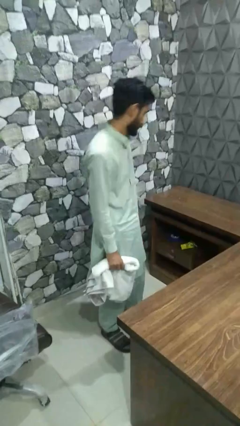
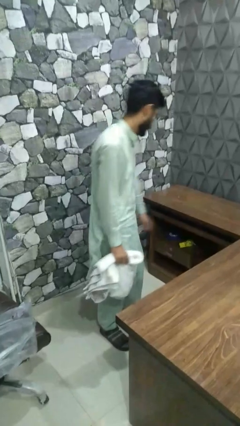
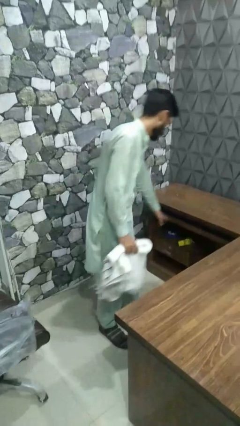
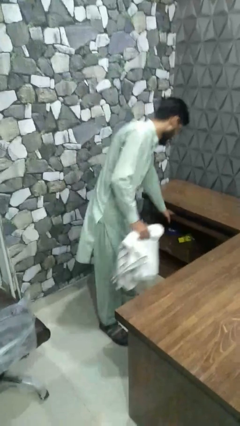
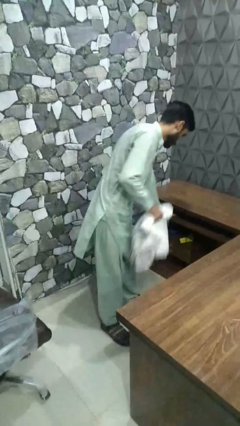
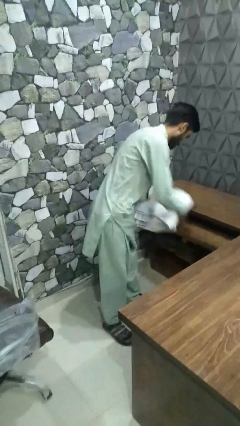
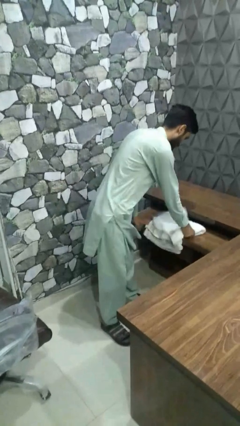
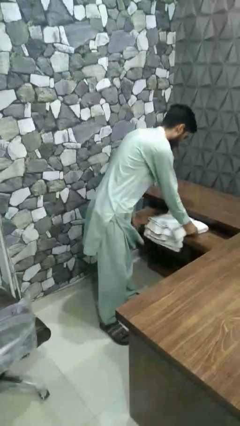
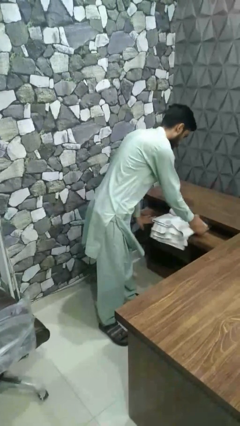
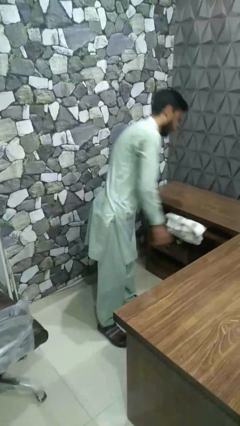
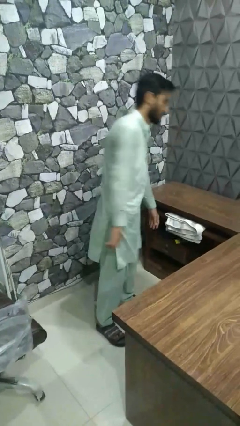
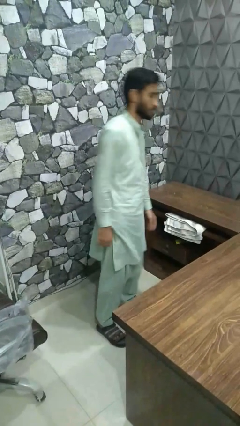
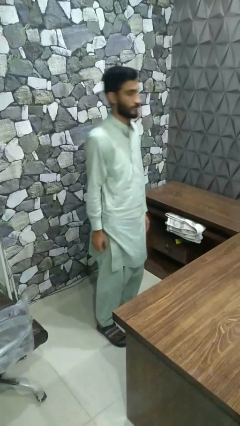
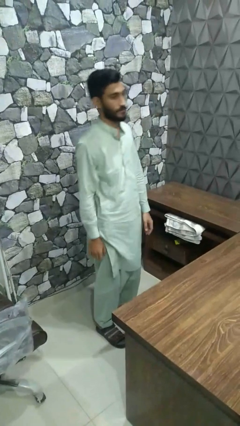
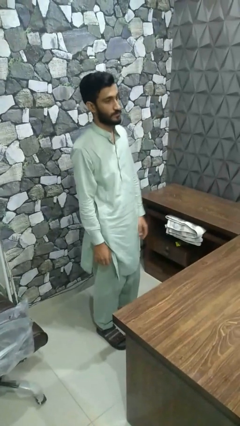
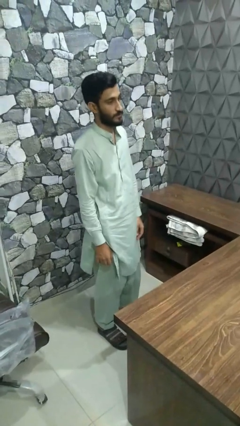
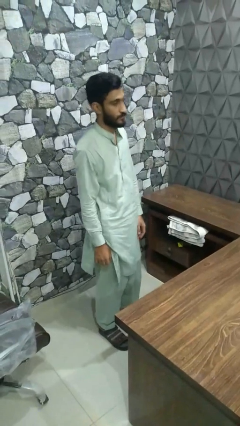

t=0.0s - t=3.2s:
person puts clothes into dresser

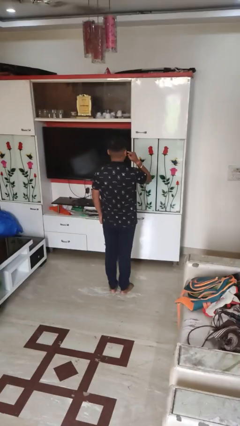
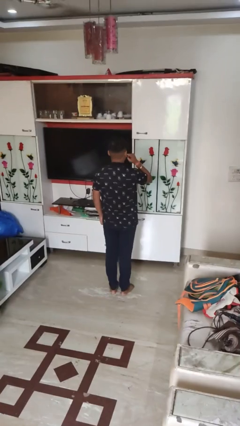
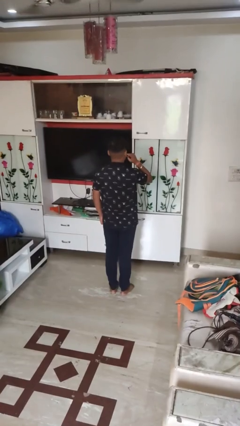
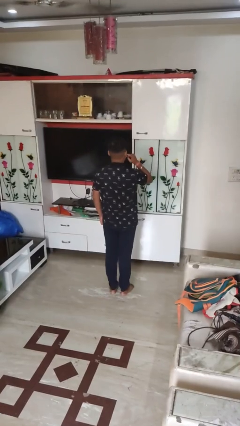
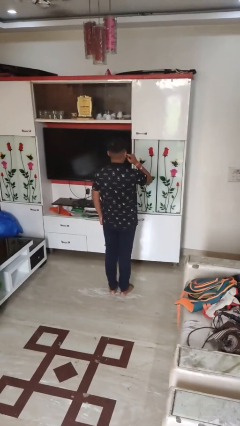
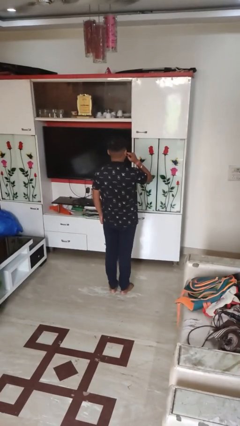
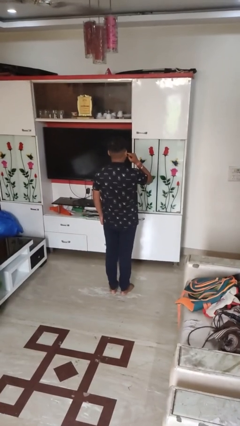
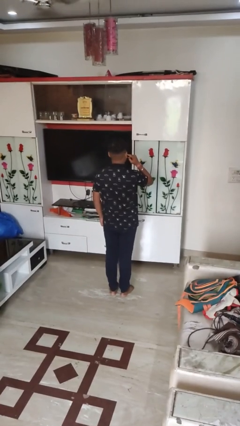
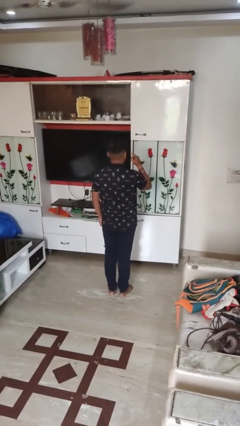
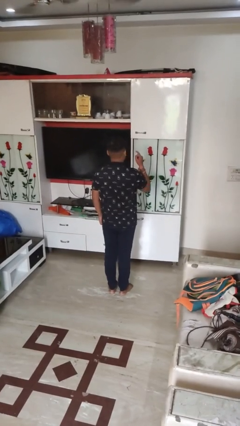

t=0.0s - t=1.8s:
person gestures listen closely

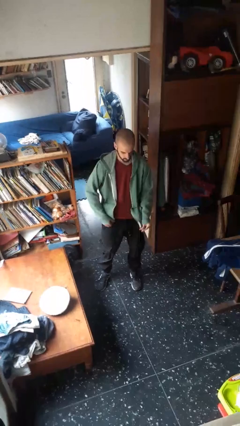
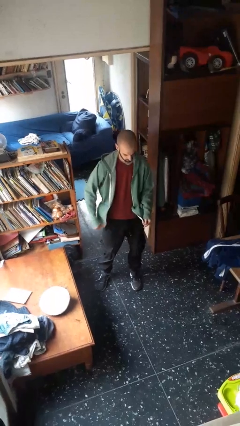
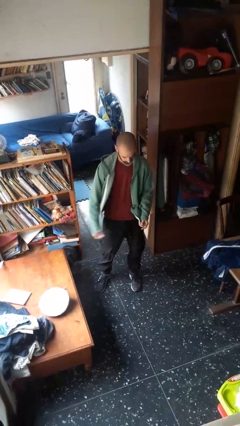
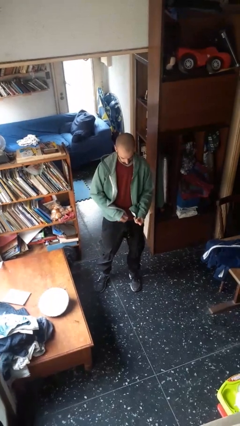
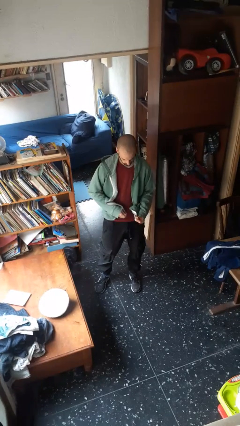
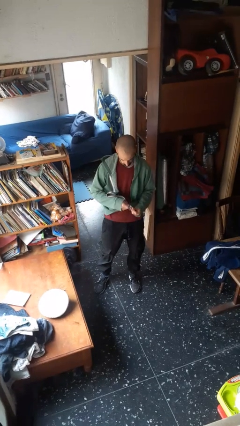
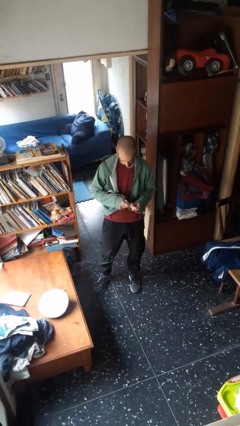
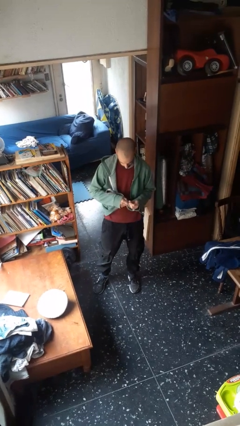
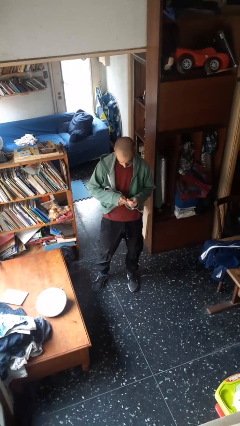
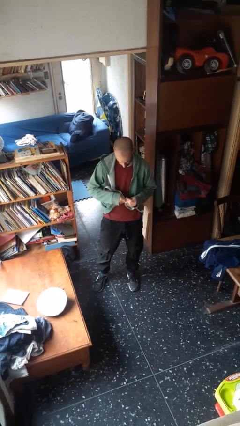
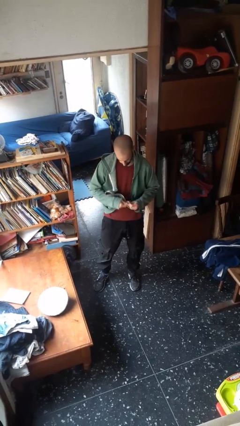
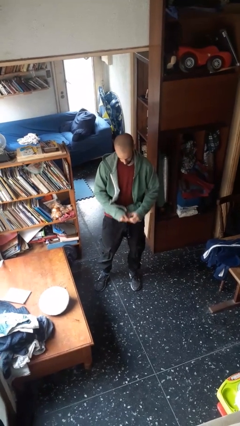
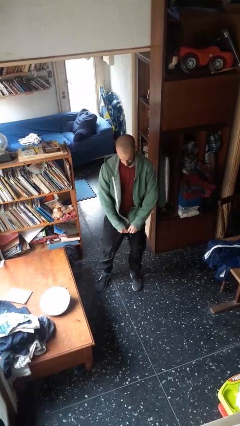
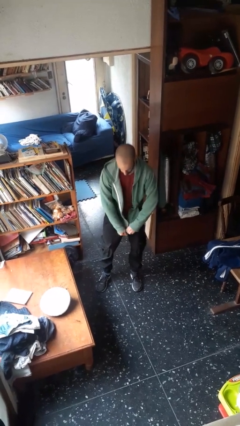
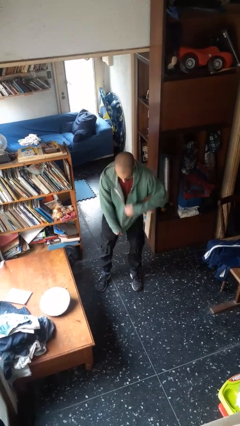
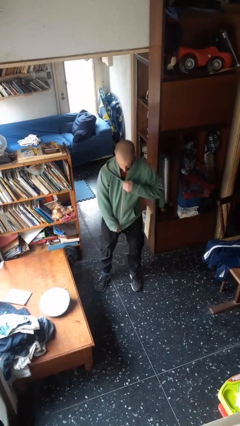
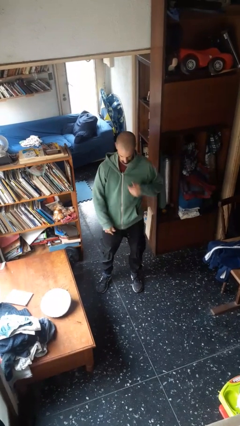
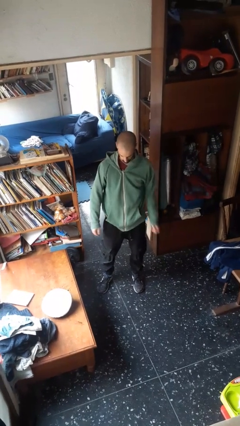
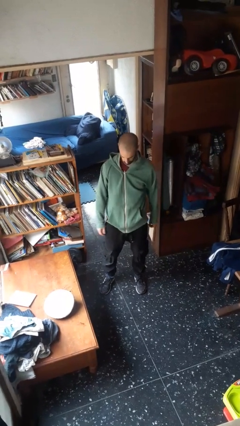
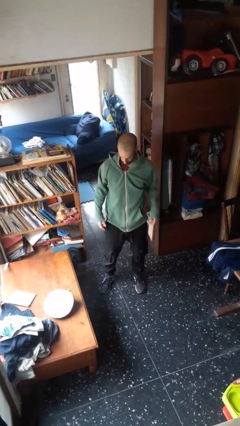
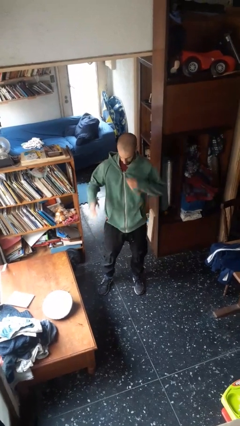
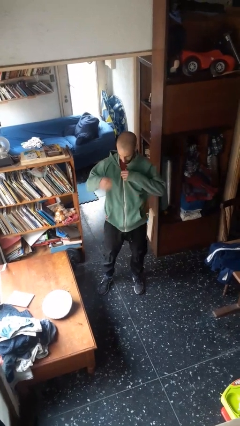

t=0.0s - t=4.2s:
person zips up jacket

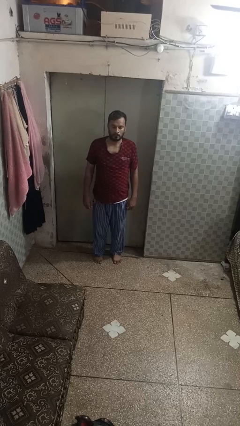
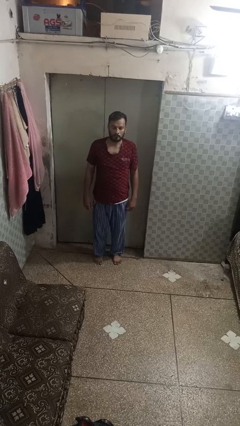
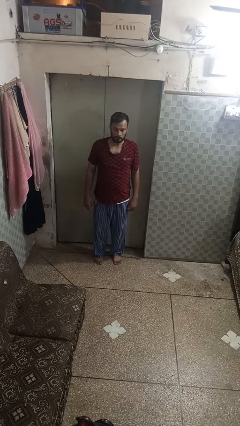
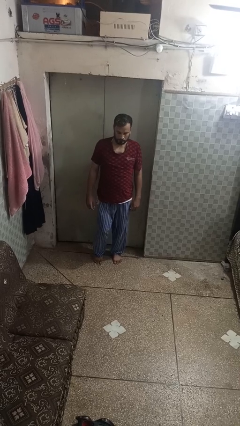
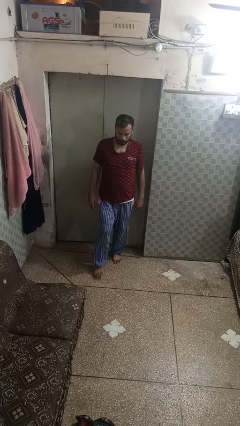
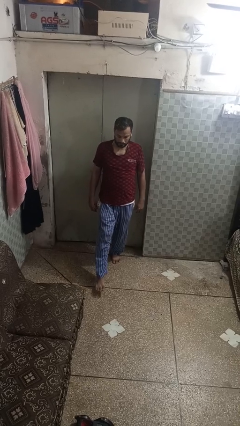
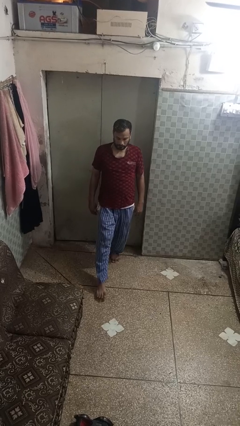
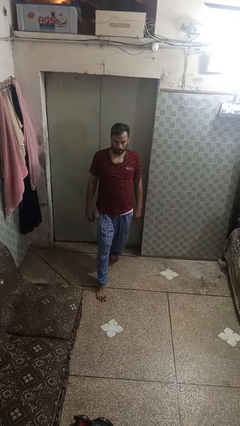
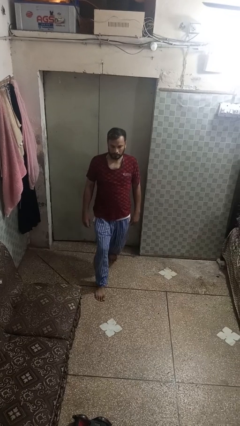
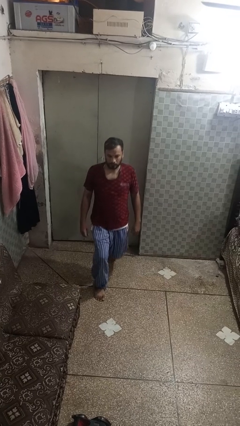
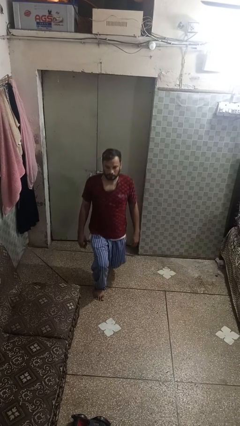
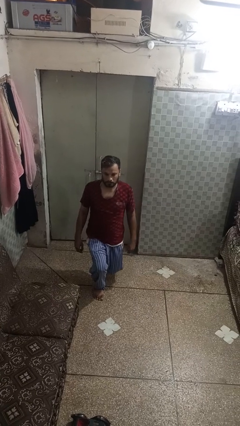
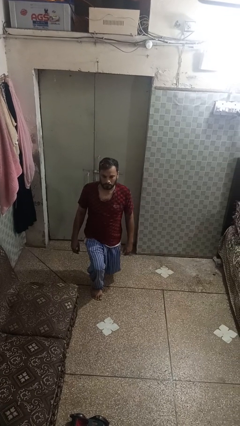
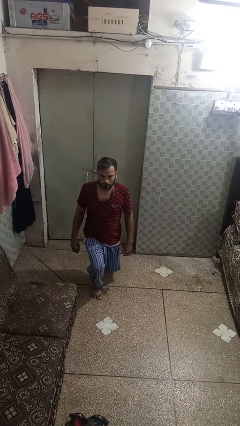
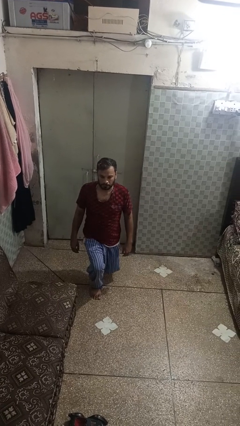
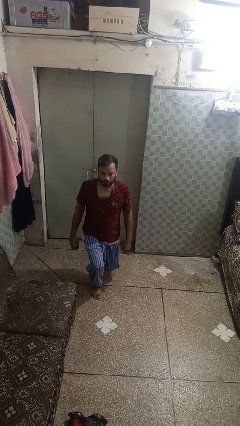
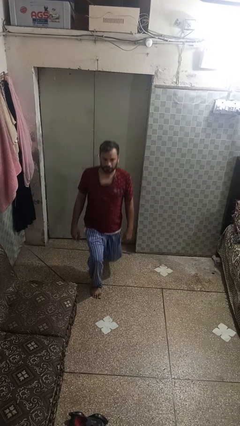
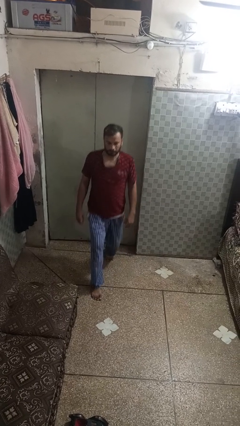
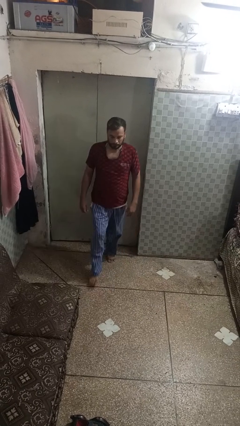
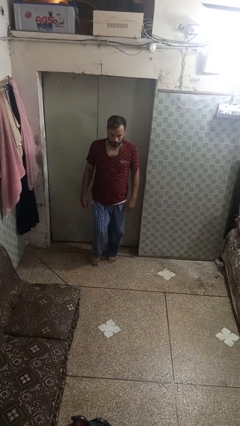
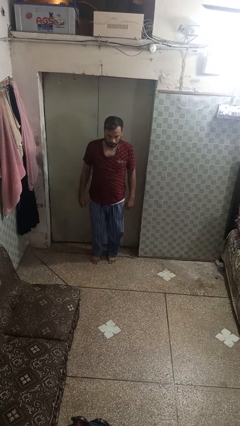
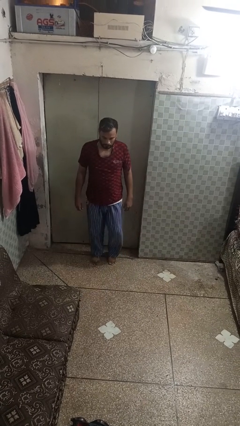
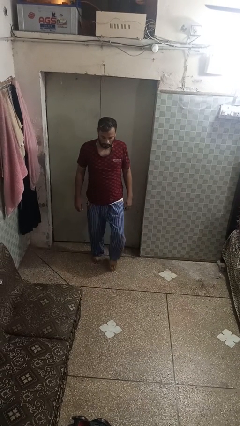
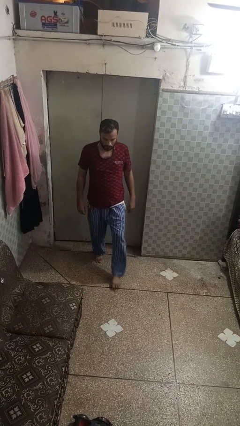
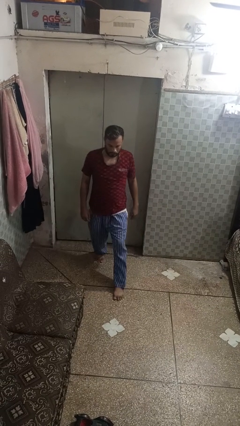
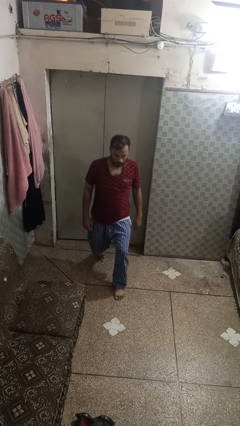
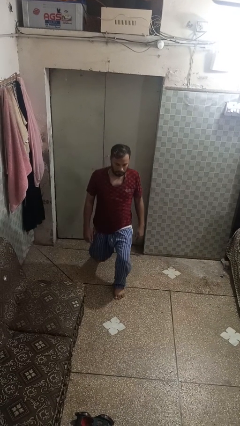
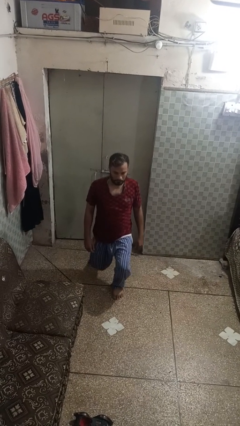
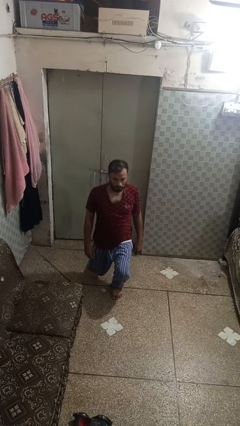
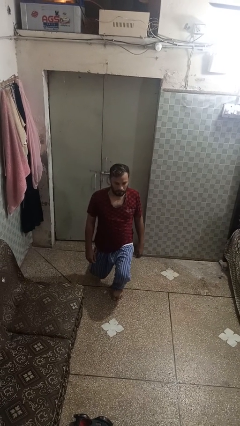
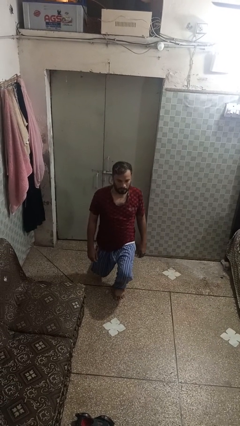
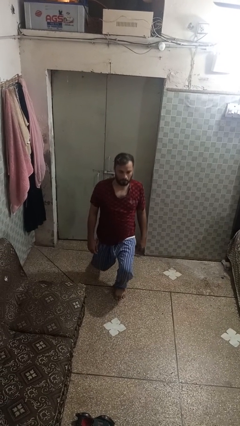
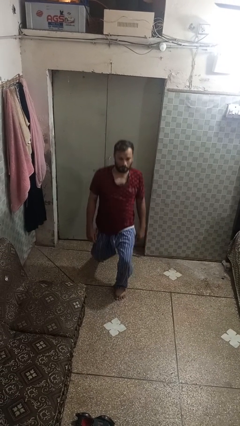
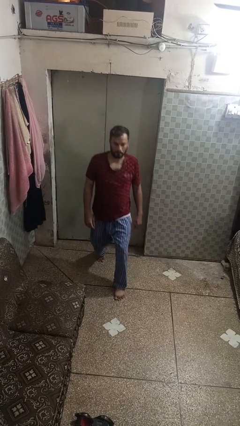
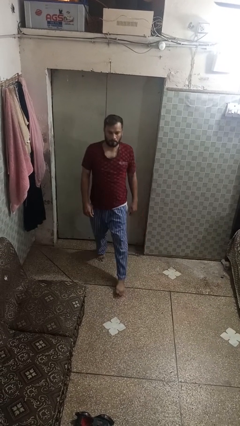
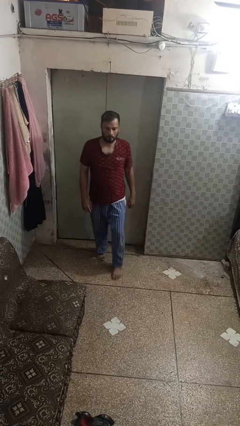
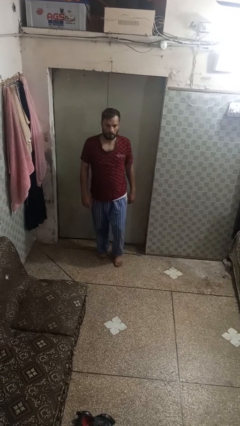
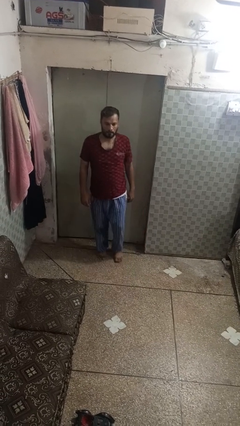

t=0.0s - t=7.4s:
person exercises with lunges

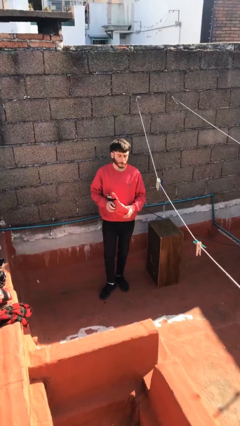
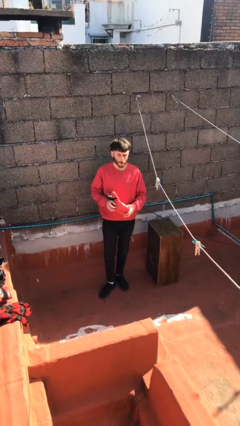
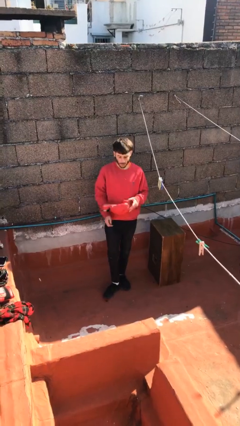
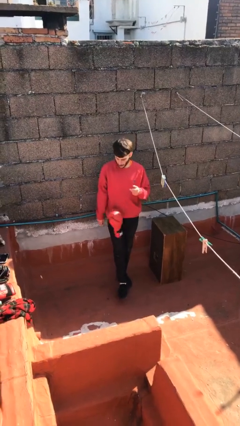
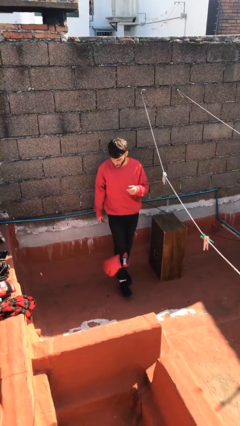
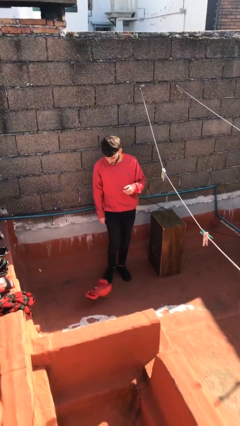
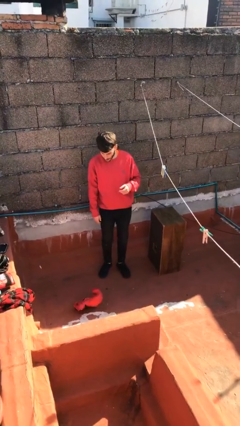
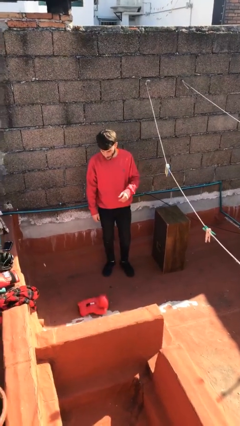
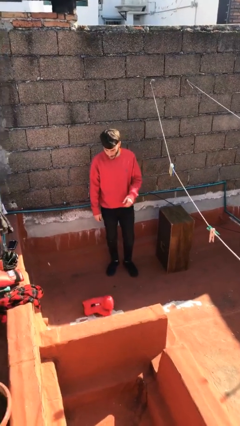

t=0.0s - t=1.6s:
person drops object
